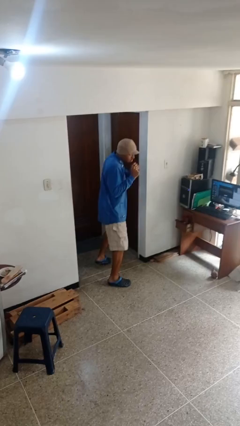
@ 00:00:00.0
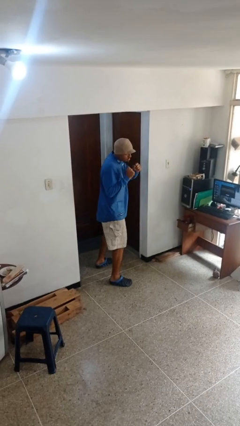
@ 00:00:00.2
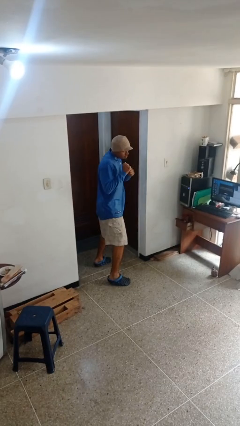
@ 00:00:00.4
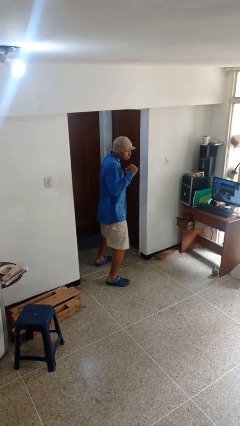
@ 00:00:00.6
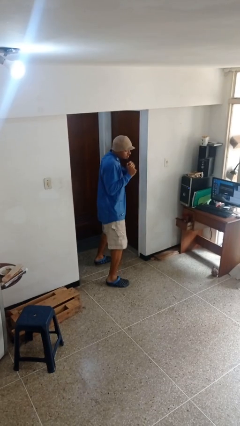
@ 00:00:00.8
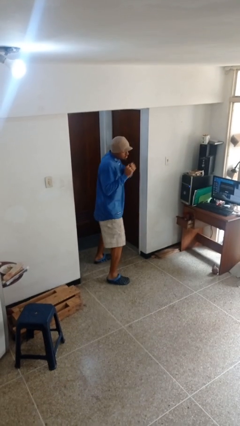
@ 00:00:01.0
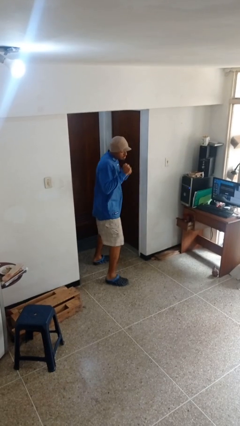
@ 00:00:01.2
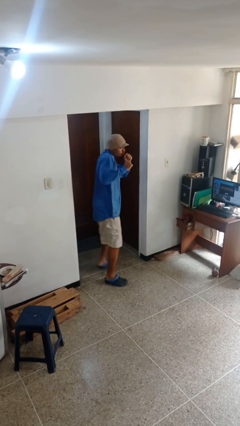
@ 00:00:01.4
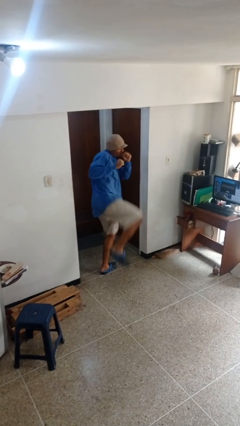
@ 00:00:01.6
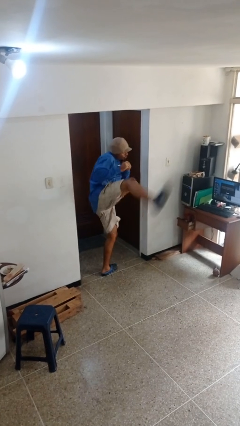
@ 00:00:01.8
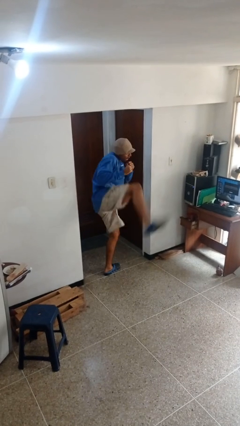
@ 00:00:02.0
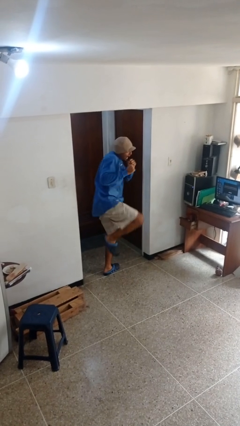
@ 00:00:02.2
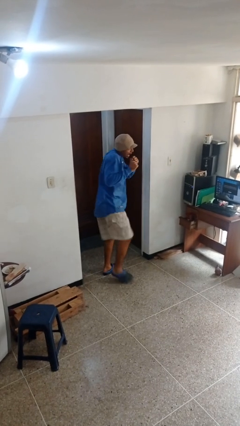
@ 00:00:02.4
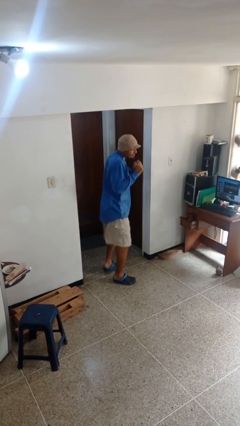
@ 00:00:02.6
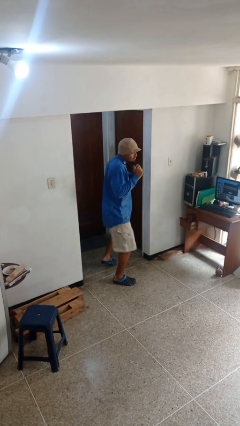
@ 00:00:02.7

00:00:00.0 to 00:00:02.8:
person karate kicks

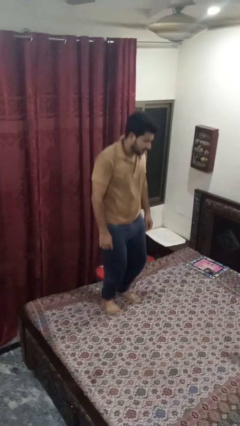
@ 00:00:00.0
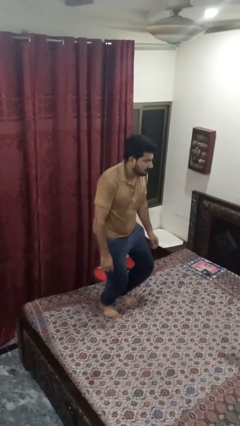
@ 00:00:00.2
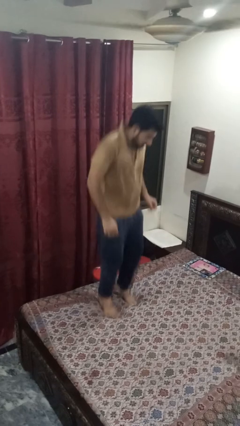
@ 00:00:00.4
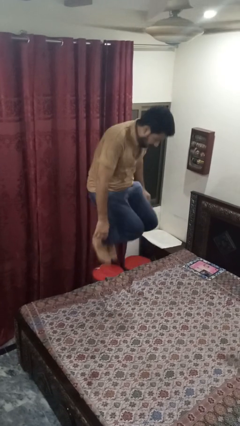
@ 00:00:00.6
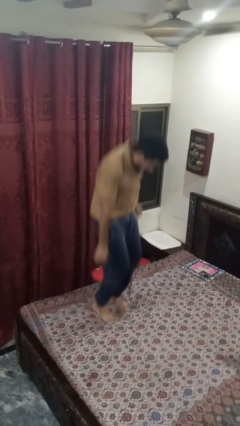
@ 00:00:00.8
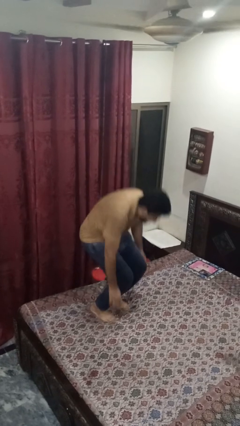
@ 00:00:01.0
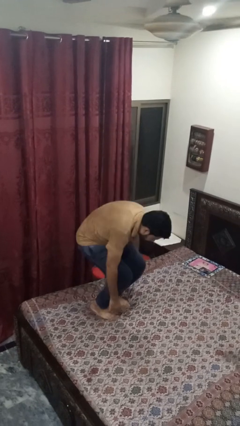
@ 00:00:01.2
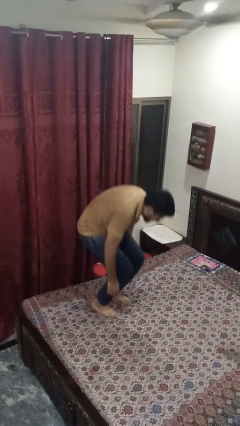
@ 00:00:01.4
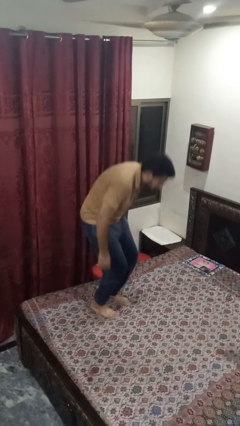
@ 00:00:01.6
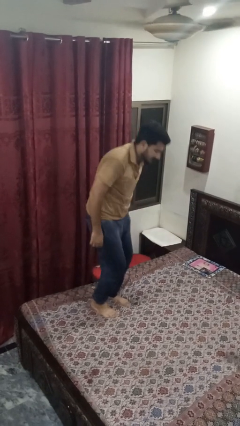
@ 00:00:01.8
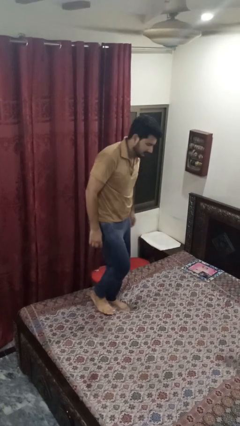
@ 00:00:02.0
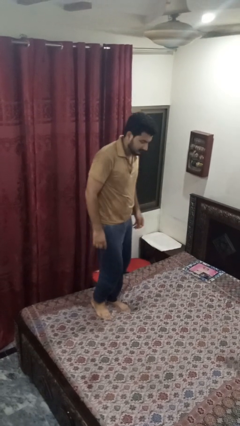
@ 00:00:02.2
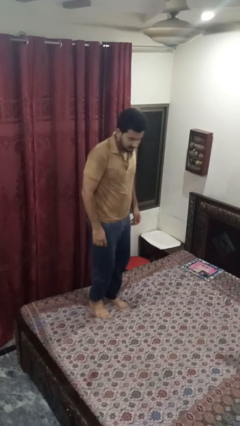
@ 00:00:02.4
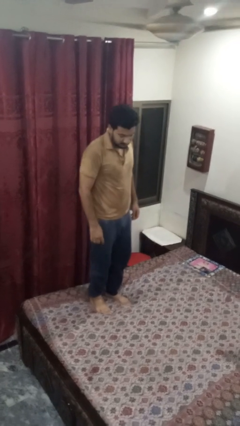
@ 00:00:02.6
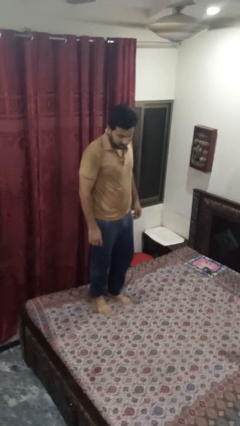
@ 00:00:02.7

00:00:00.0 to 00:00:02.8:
person jumps on bed

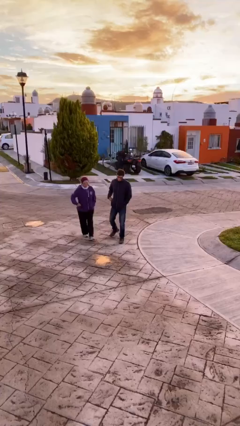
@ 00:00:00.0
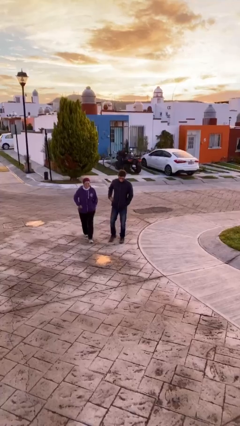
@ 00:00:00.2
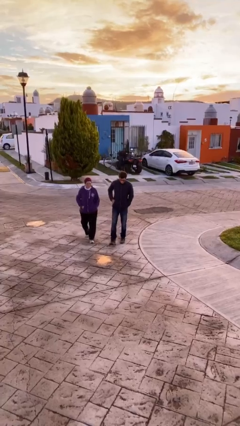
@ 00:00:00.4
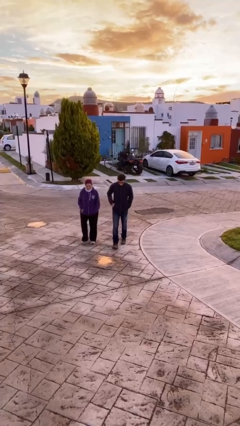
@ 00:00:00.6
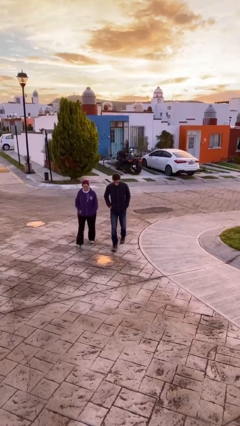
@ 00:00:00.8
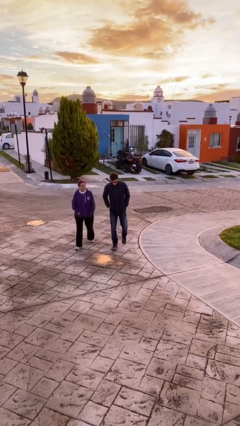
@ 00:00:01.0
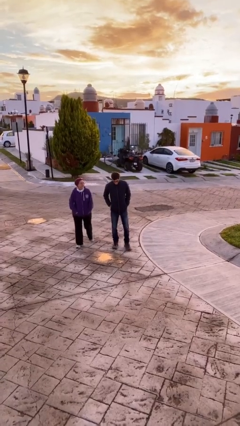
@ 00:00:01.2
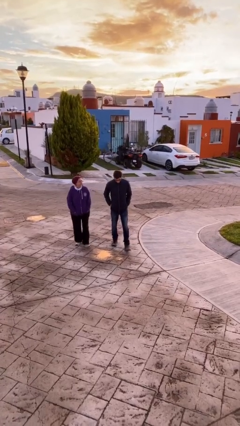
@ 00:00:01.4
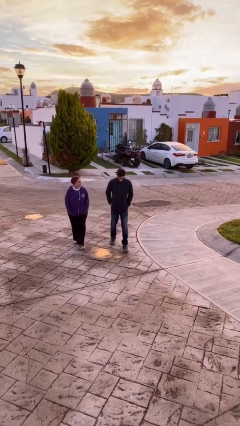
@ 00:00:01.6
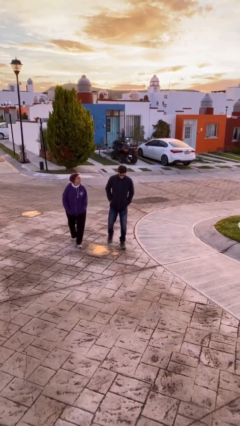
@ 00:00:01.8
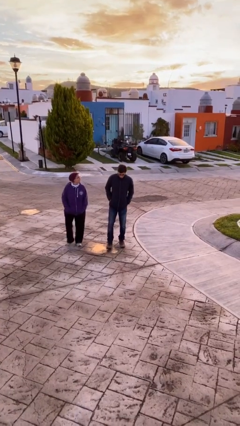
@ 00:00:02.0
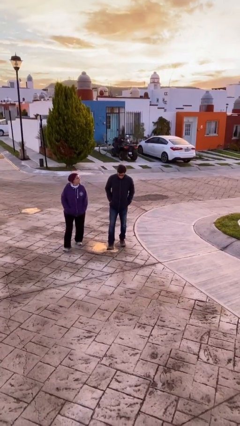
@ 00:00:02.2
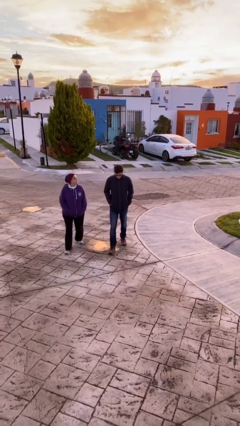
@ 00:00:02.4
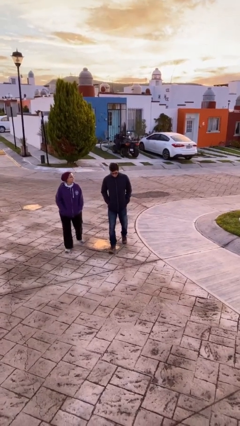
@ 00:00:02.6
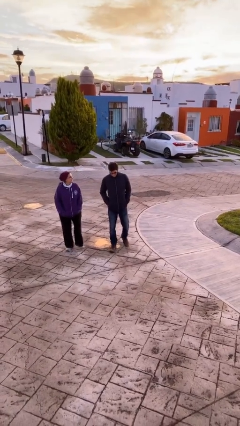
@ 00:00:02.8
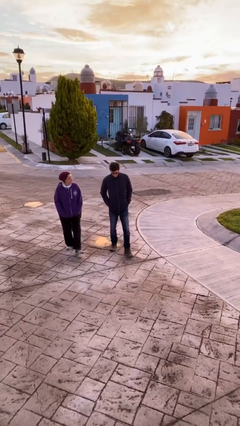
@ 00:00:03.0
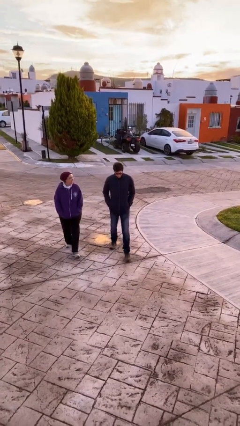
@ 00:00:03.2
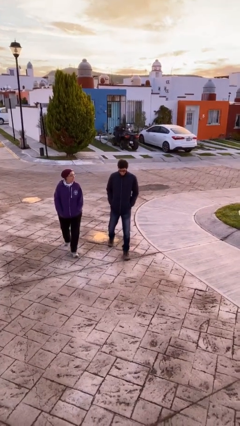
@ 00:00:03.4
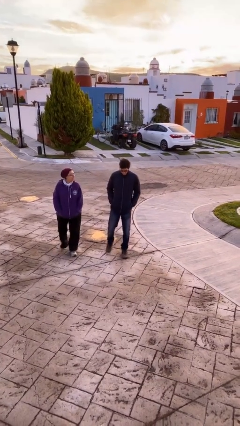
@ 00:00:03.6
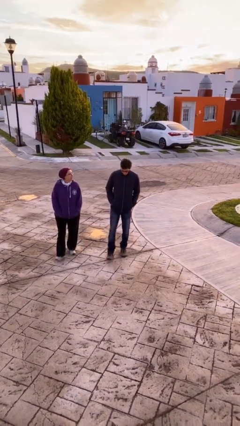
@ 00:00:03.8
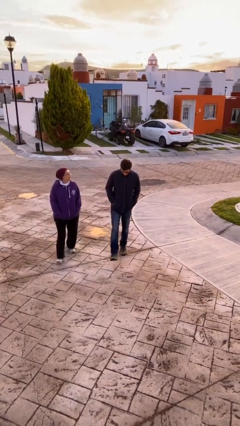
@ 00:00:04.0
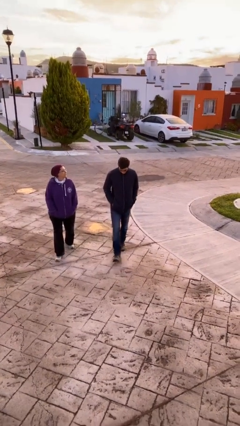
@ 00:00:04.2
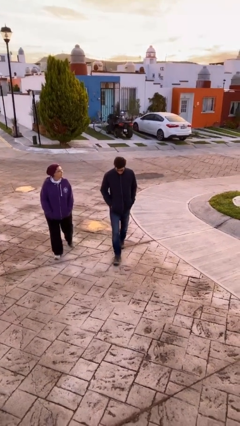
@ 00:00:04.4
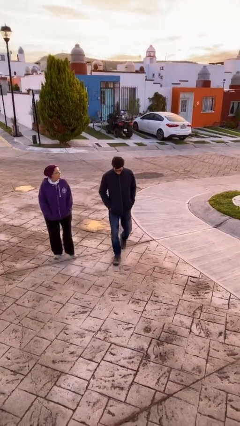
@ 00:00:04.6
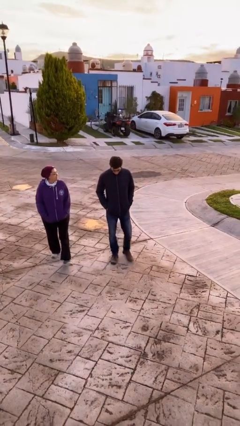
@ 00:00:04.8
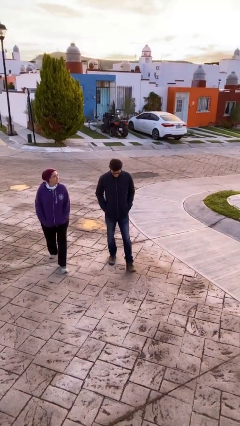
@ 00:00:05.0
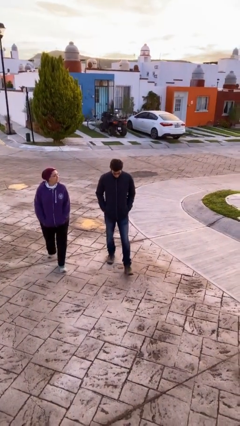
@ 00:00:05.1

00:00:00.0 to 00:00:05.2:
person talks to person

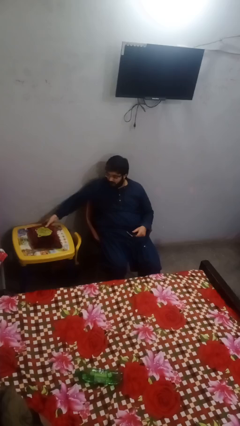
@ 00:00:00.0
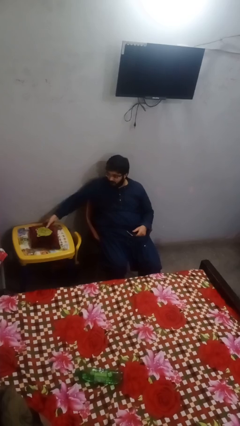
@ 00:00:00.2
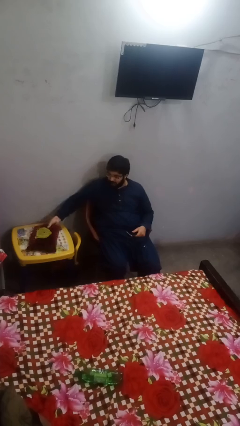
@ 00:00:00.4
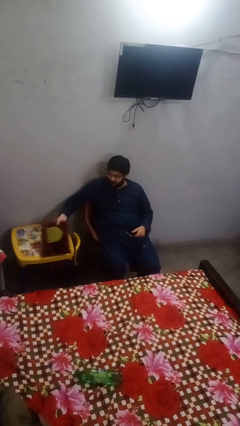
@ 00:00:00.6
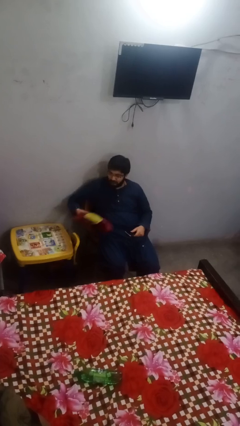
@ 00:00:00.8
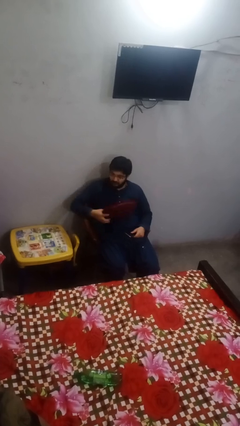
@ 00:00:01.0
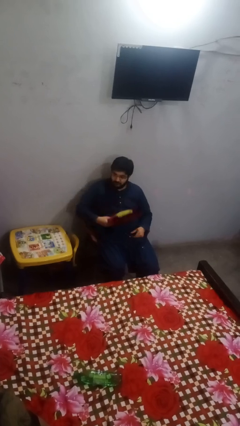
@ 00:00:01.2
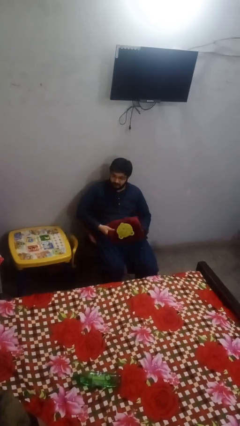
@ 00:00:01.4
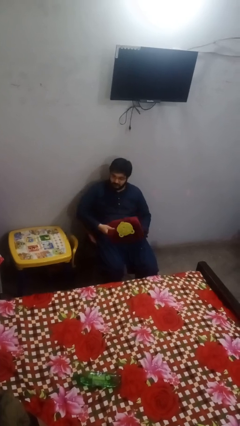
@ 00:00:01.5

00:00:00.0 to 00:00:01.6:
person picks up object from table

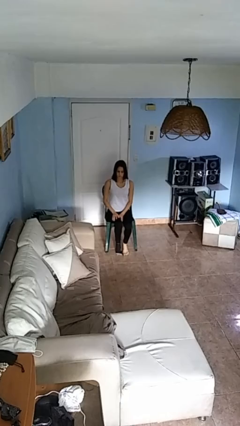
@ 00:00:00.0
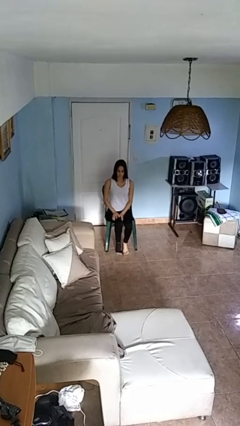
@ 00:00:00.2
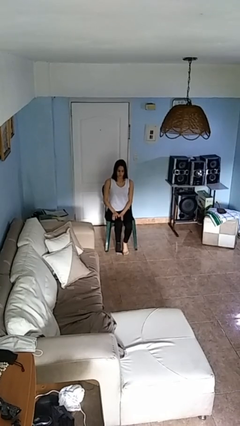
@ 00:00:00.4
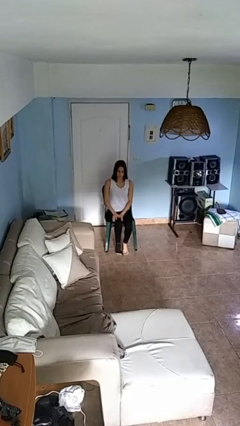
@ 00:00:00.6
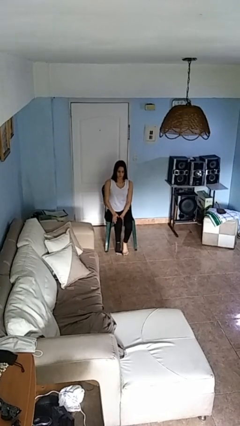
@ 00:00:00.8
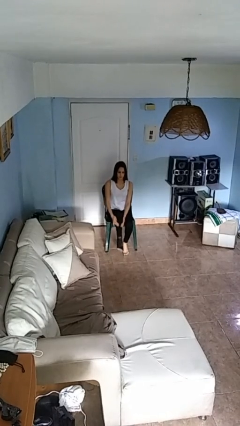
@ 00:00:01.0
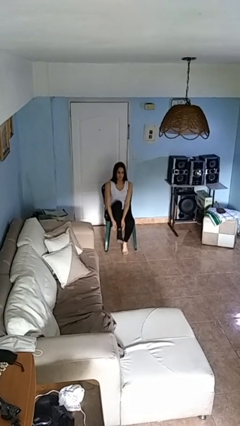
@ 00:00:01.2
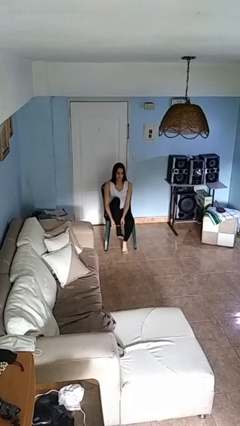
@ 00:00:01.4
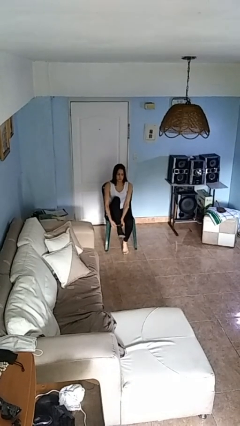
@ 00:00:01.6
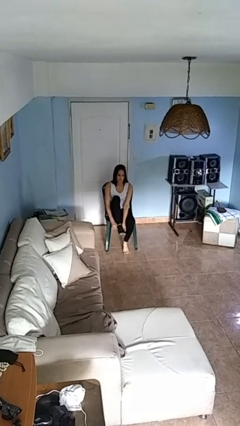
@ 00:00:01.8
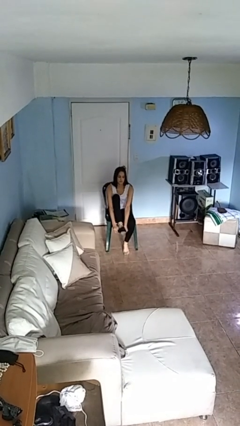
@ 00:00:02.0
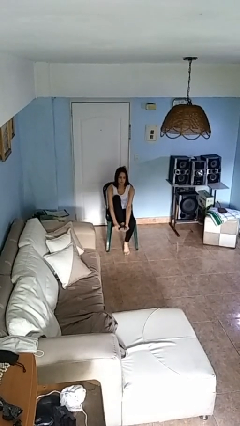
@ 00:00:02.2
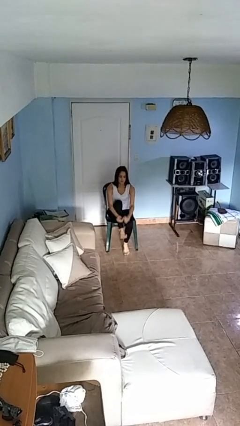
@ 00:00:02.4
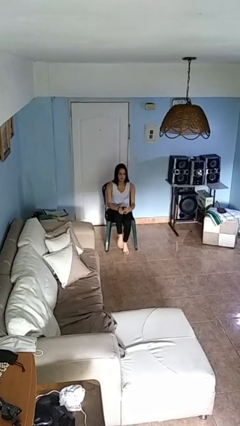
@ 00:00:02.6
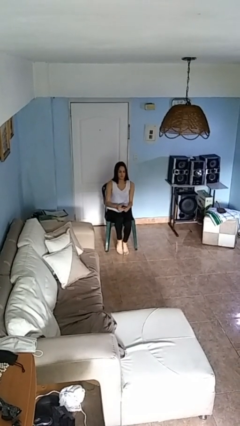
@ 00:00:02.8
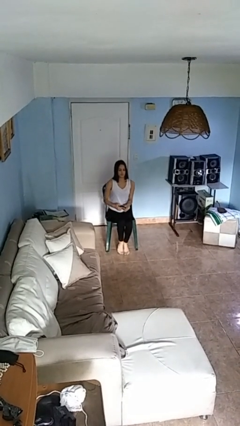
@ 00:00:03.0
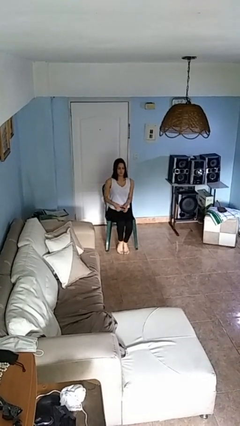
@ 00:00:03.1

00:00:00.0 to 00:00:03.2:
person takes off socks

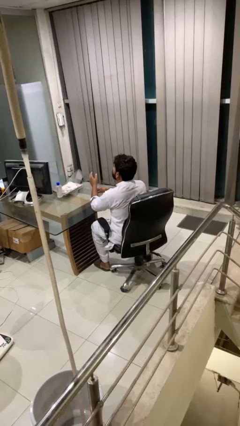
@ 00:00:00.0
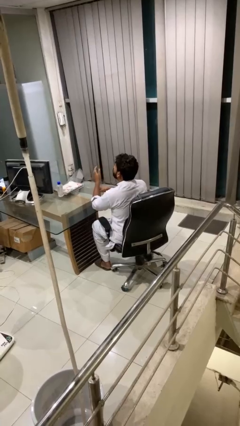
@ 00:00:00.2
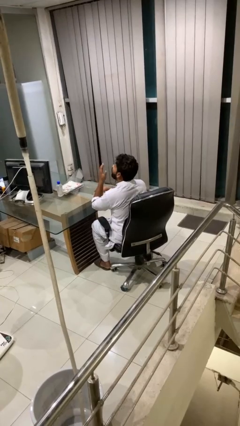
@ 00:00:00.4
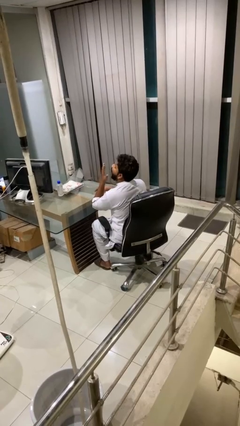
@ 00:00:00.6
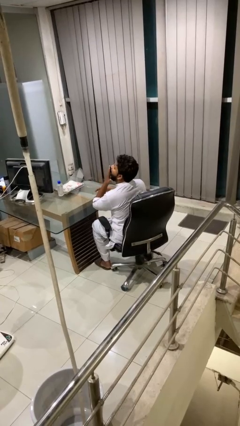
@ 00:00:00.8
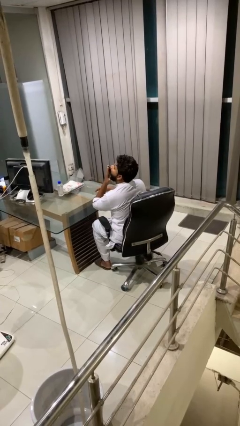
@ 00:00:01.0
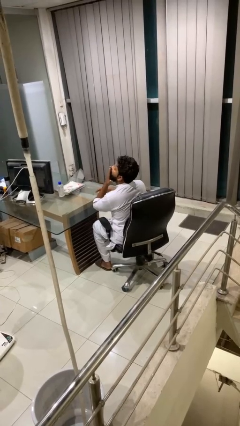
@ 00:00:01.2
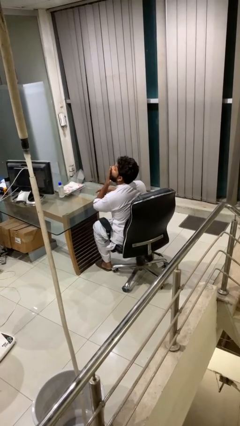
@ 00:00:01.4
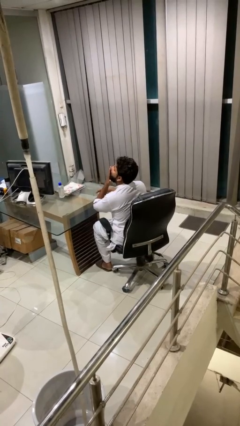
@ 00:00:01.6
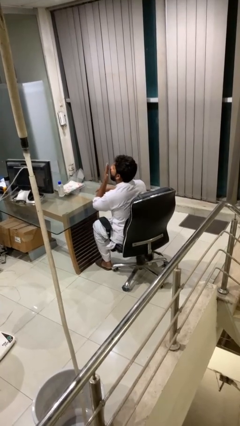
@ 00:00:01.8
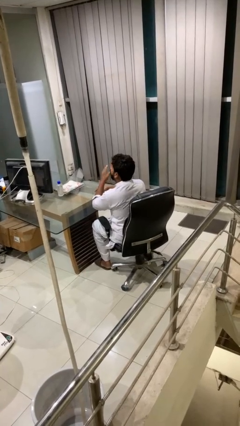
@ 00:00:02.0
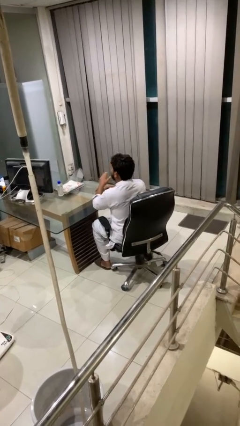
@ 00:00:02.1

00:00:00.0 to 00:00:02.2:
person yawns
